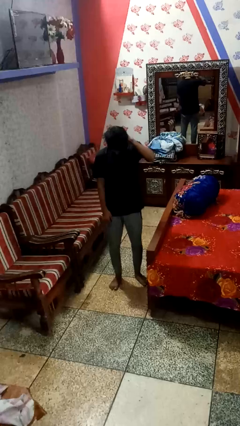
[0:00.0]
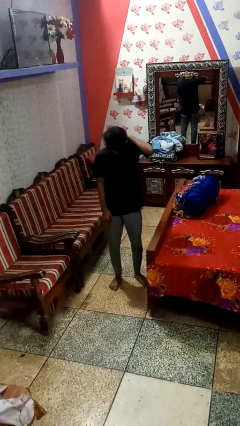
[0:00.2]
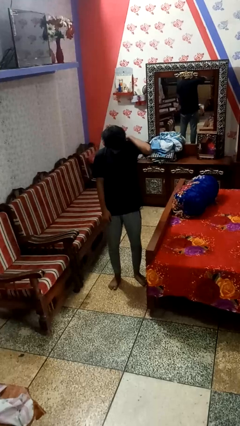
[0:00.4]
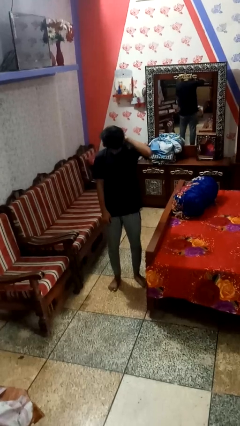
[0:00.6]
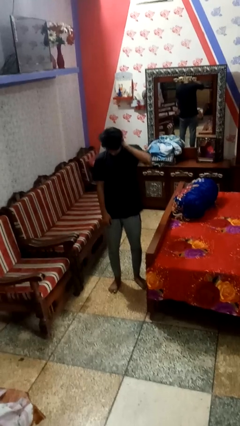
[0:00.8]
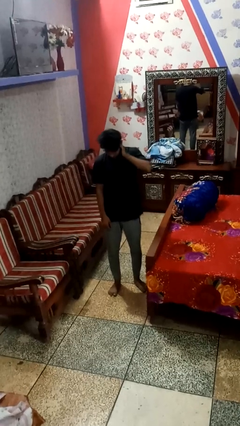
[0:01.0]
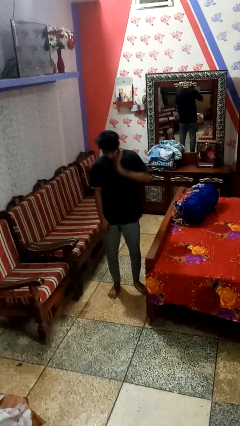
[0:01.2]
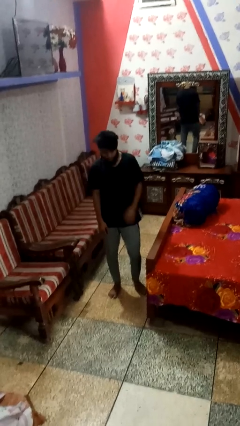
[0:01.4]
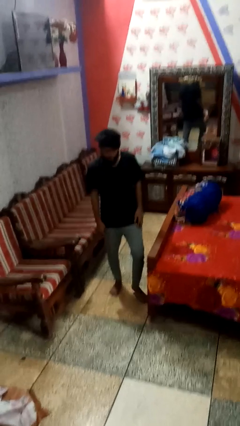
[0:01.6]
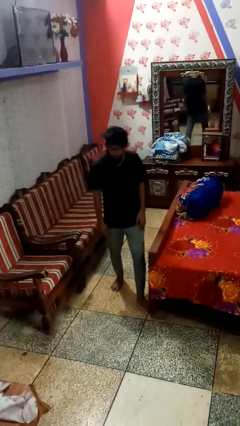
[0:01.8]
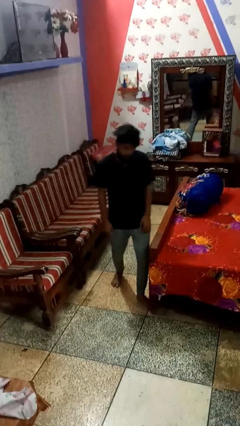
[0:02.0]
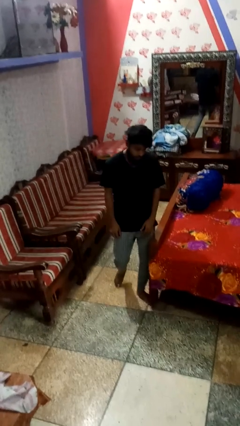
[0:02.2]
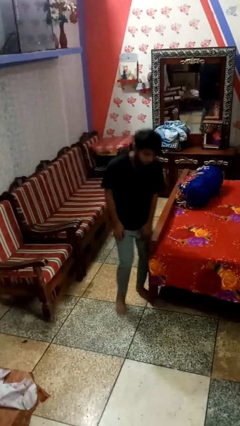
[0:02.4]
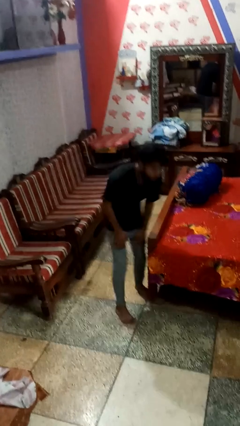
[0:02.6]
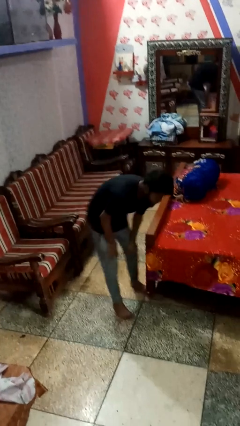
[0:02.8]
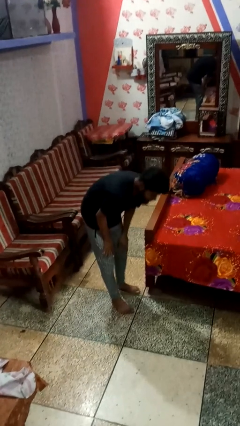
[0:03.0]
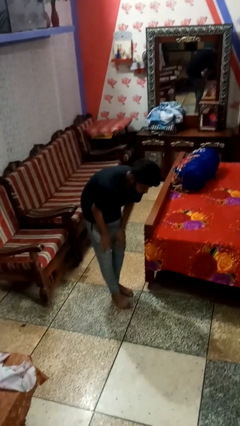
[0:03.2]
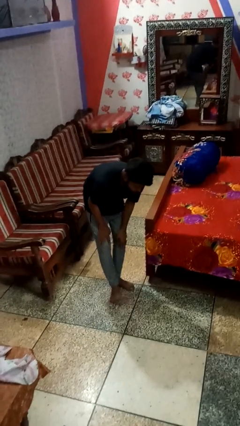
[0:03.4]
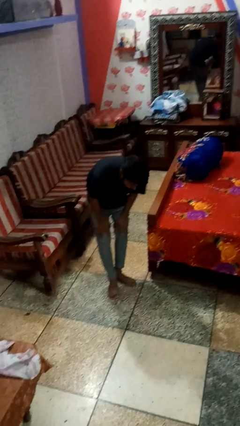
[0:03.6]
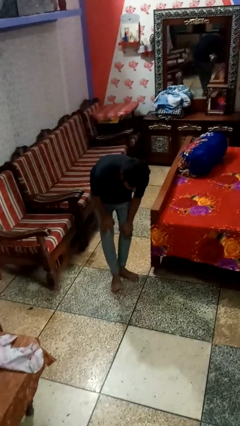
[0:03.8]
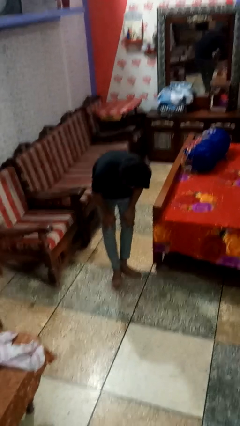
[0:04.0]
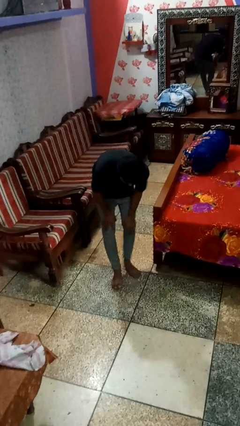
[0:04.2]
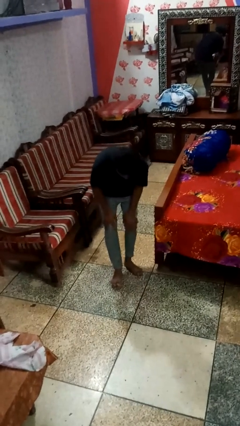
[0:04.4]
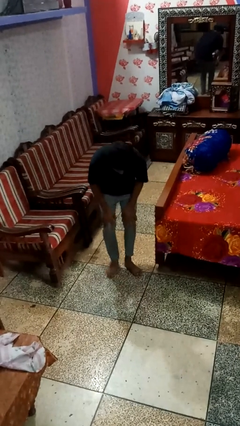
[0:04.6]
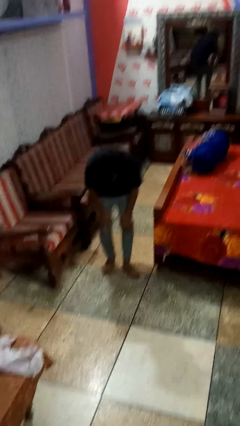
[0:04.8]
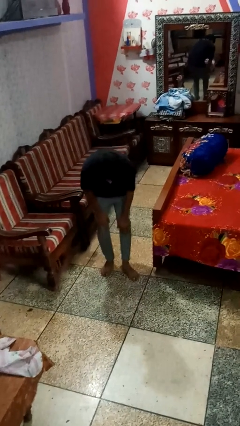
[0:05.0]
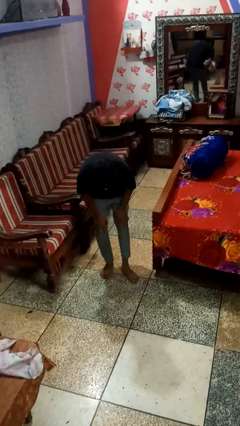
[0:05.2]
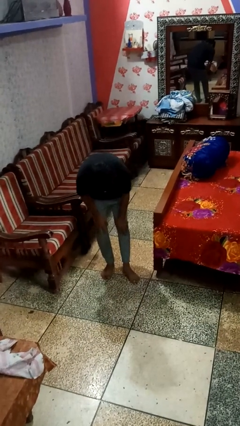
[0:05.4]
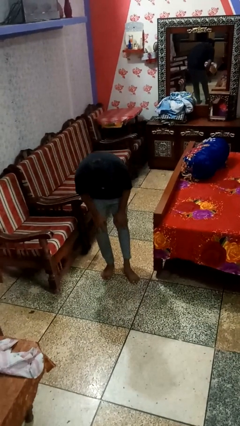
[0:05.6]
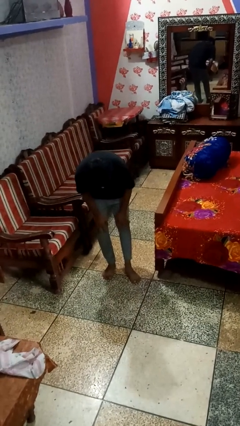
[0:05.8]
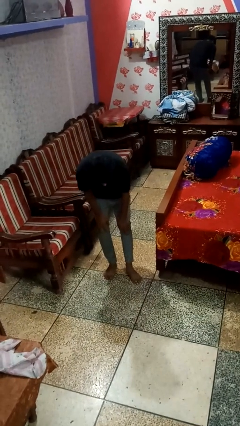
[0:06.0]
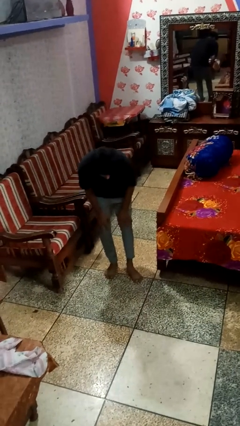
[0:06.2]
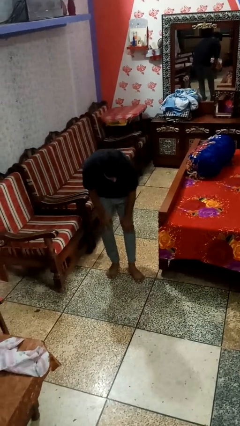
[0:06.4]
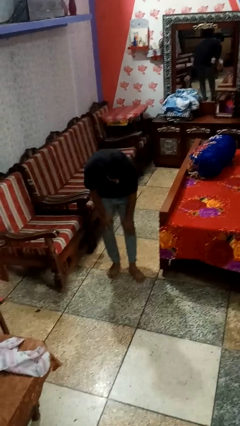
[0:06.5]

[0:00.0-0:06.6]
person trips on object on floor

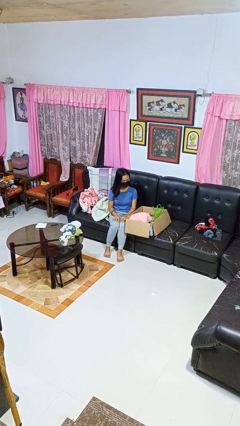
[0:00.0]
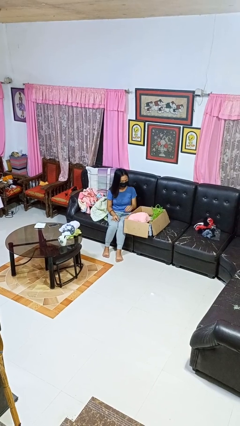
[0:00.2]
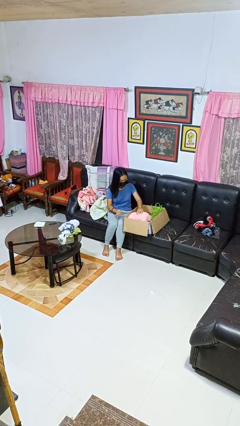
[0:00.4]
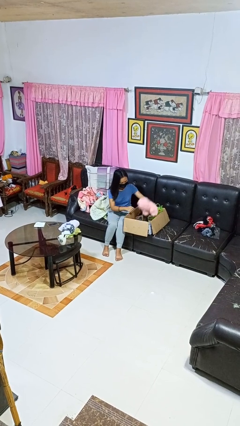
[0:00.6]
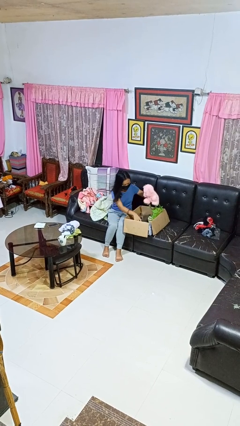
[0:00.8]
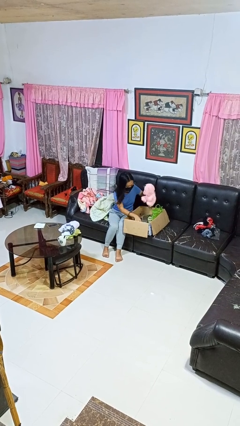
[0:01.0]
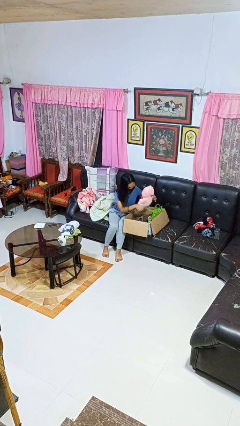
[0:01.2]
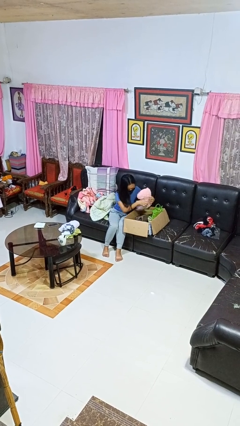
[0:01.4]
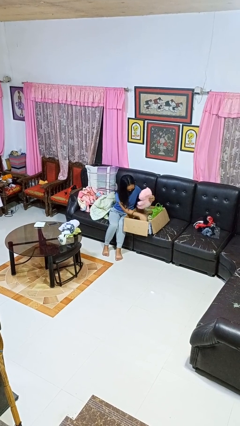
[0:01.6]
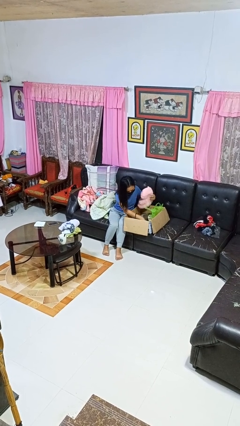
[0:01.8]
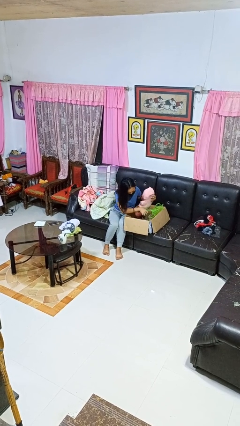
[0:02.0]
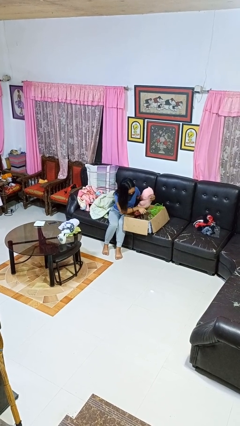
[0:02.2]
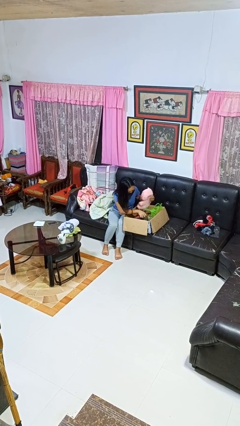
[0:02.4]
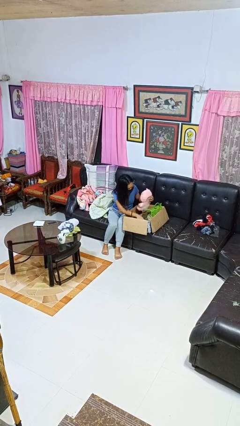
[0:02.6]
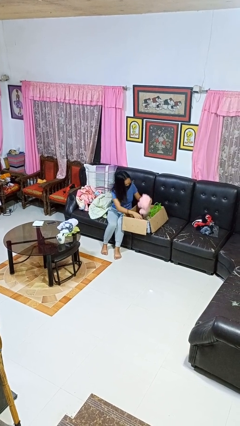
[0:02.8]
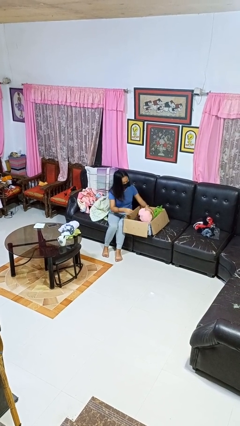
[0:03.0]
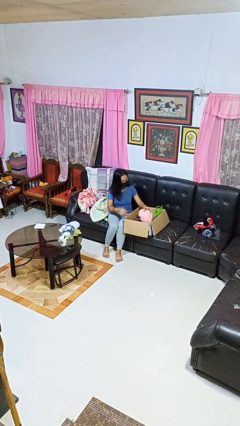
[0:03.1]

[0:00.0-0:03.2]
person searches in box

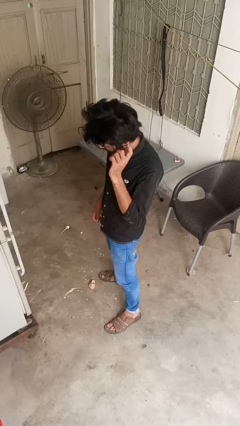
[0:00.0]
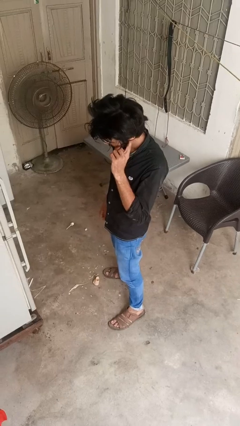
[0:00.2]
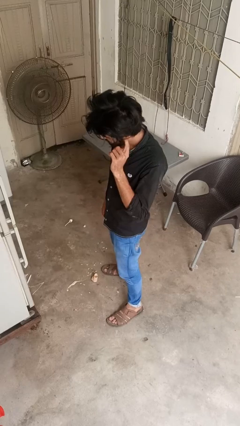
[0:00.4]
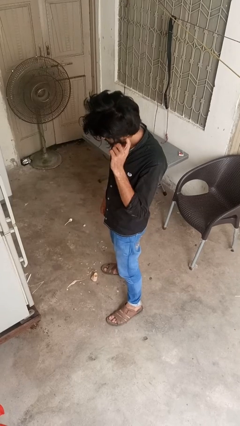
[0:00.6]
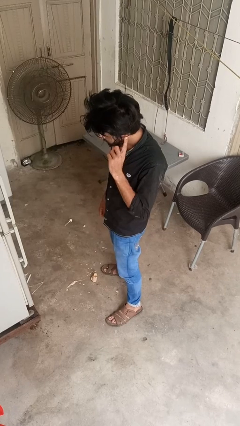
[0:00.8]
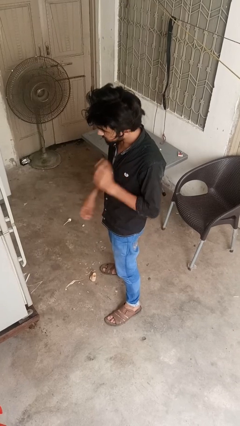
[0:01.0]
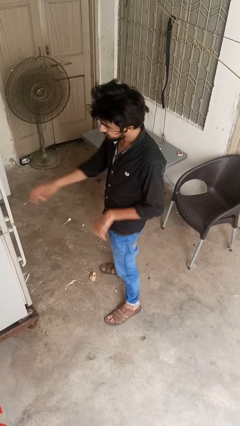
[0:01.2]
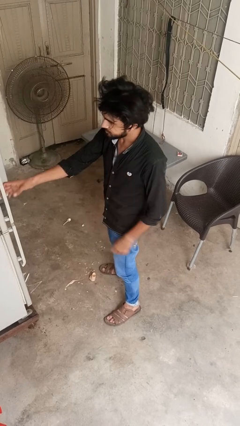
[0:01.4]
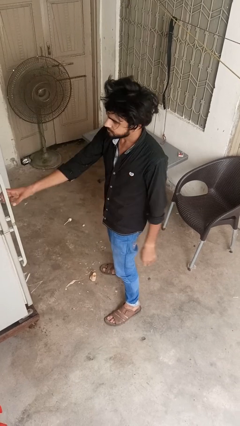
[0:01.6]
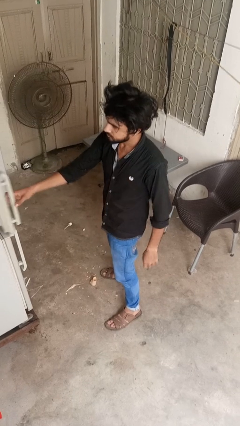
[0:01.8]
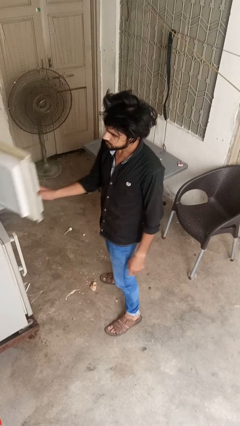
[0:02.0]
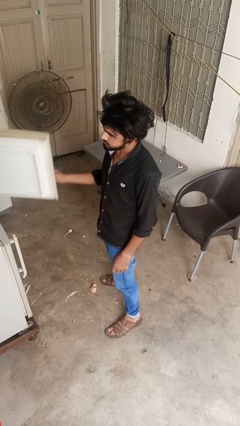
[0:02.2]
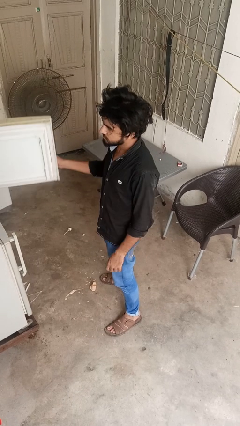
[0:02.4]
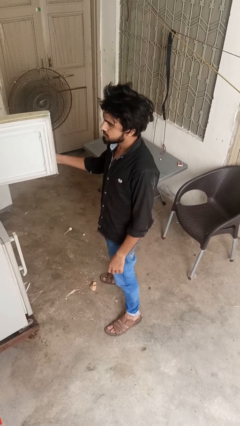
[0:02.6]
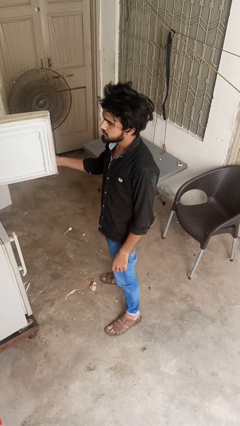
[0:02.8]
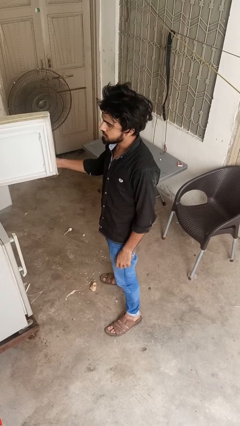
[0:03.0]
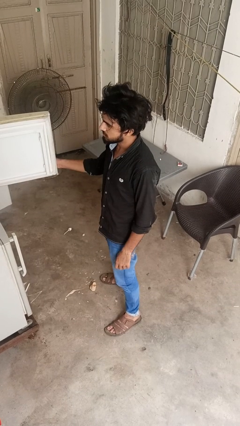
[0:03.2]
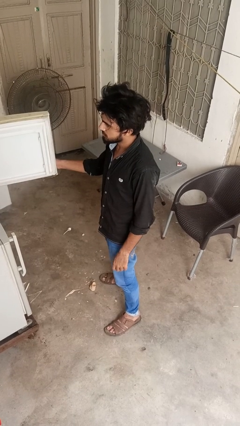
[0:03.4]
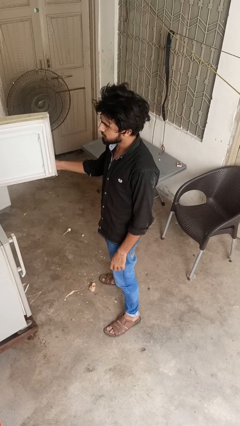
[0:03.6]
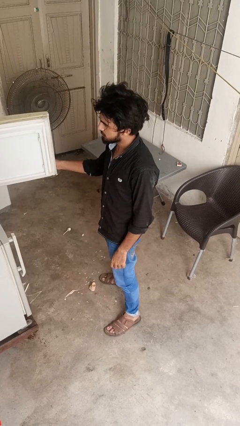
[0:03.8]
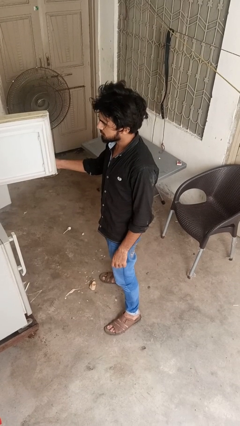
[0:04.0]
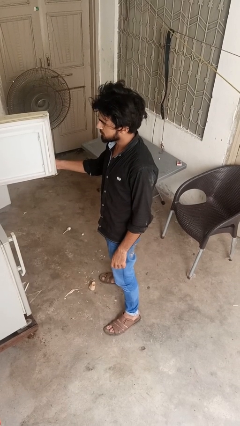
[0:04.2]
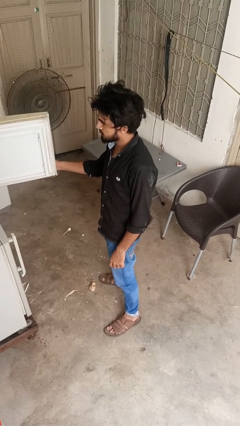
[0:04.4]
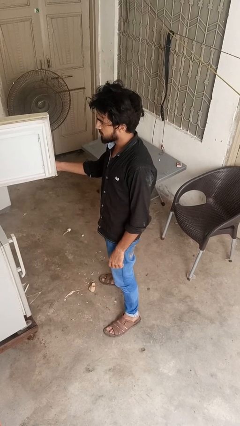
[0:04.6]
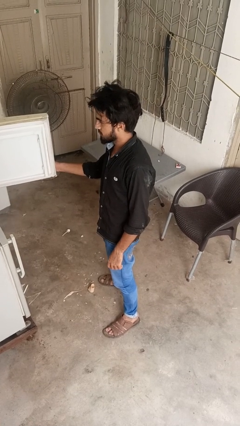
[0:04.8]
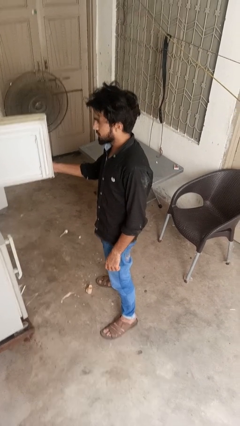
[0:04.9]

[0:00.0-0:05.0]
person opens refrigerator

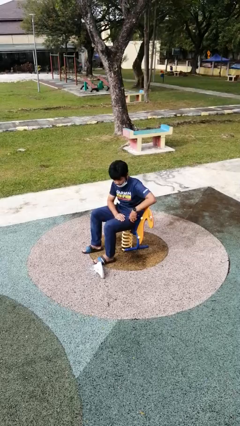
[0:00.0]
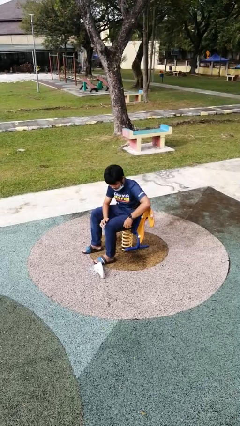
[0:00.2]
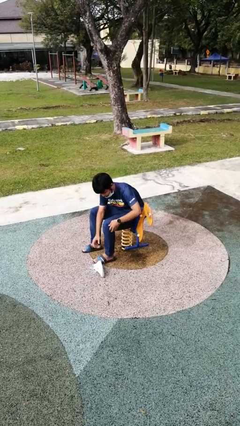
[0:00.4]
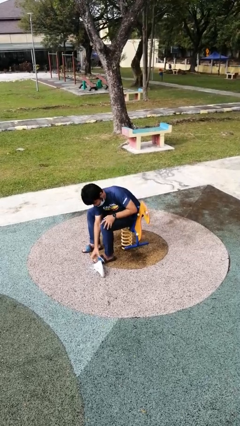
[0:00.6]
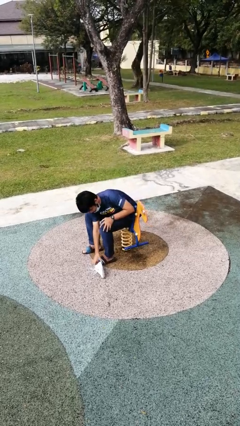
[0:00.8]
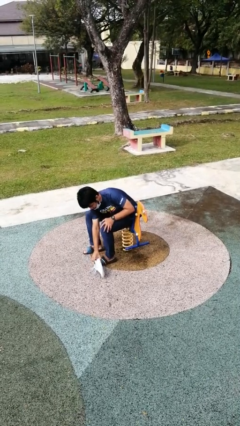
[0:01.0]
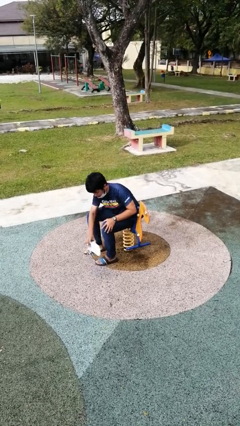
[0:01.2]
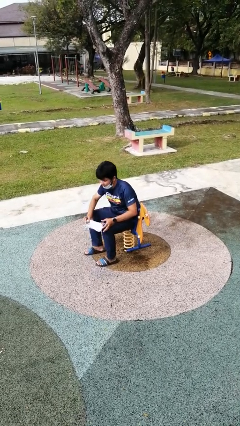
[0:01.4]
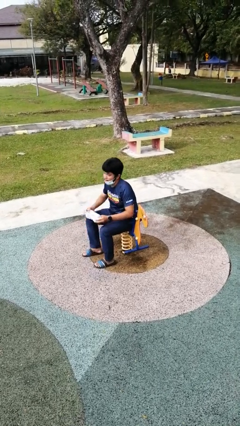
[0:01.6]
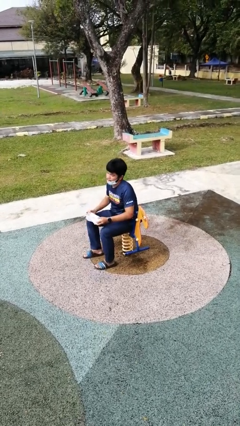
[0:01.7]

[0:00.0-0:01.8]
person picks up object from floor

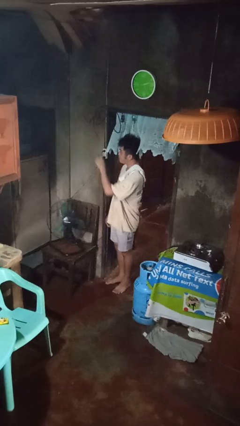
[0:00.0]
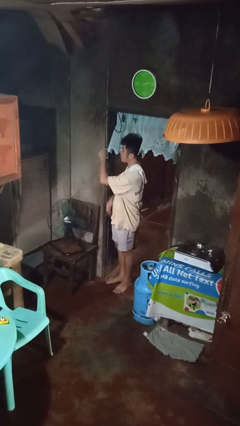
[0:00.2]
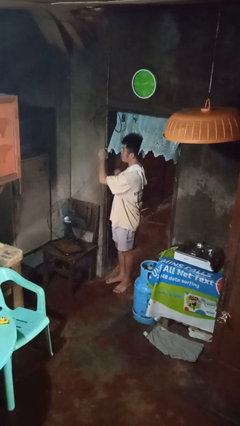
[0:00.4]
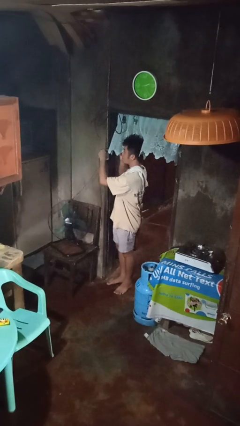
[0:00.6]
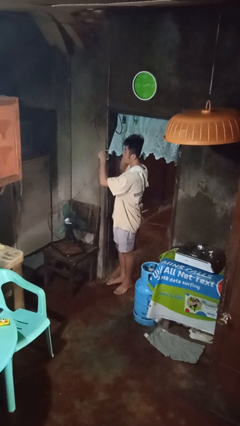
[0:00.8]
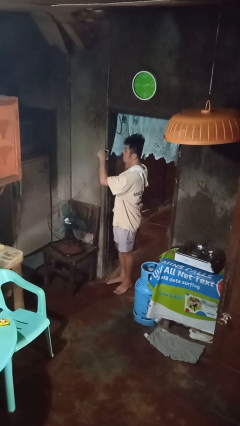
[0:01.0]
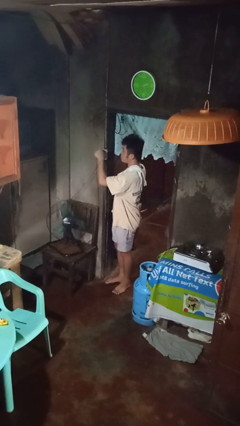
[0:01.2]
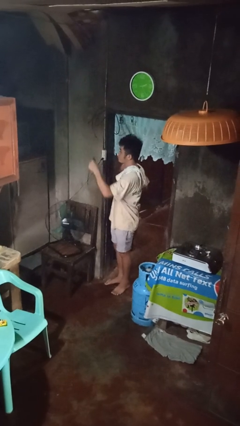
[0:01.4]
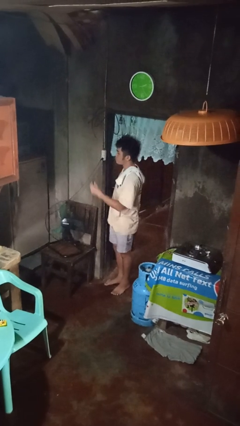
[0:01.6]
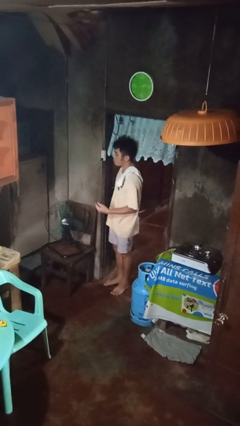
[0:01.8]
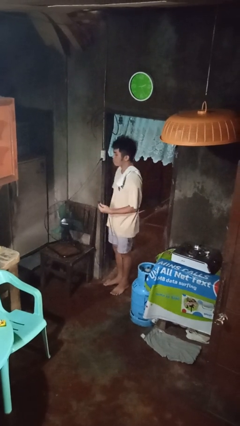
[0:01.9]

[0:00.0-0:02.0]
person unplugs from electrical socket
